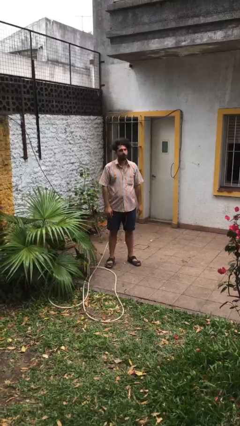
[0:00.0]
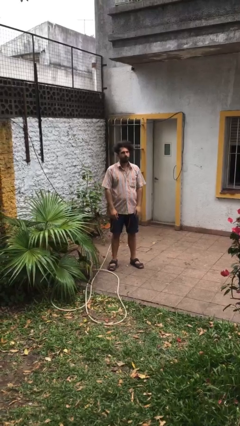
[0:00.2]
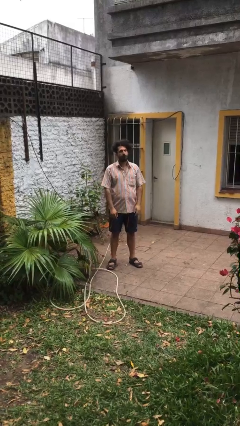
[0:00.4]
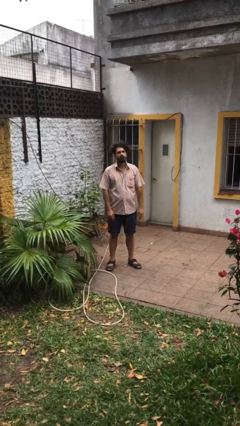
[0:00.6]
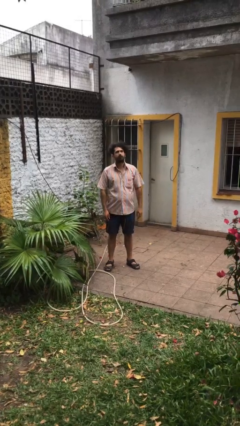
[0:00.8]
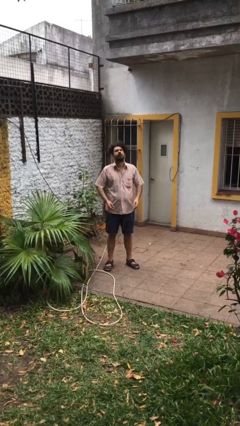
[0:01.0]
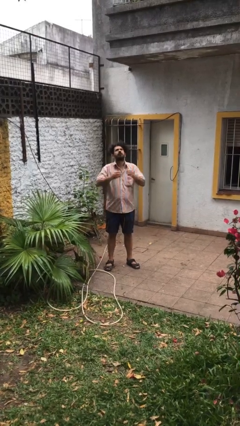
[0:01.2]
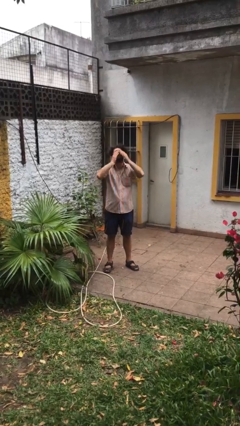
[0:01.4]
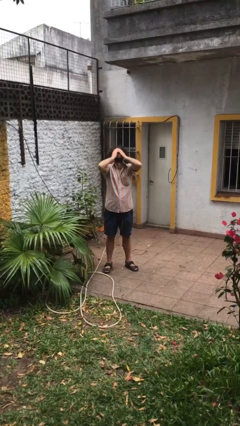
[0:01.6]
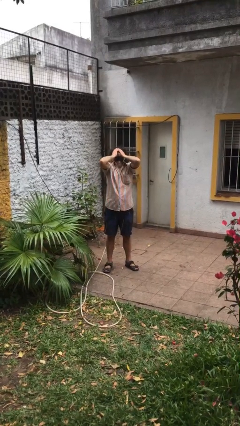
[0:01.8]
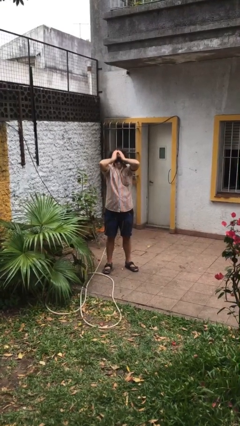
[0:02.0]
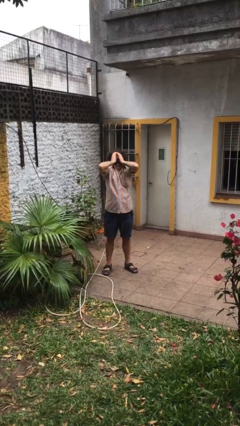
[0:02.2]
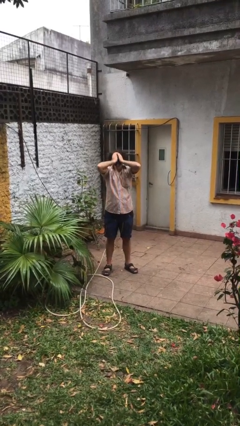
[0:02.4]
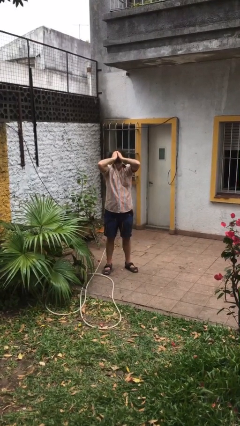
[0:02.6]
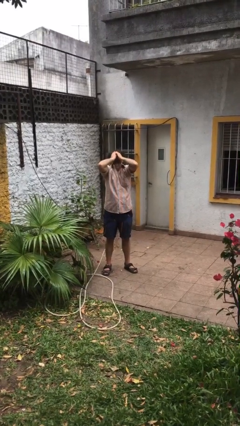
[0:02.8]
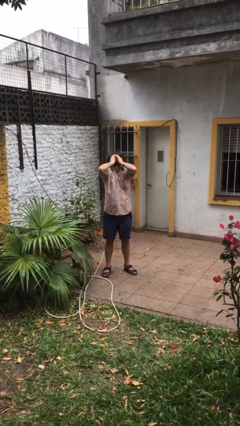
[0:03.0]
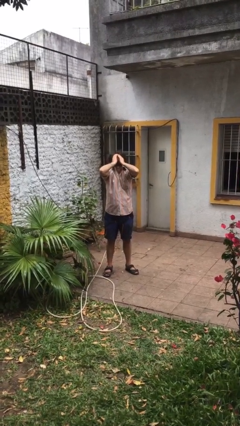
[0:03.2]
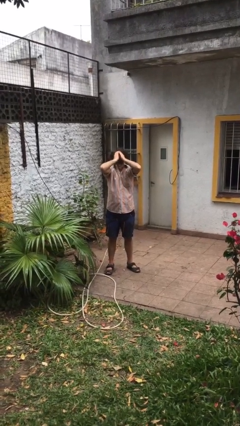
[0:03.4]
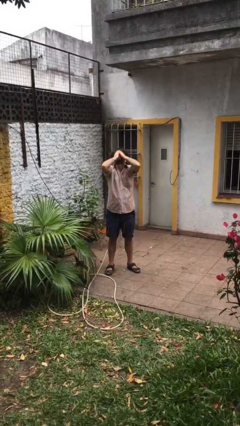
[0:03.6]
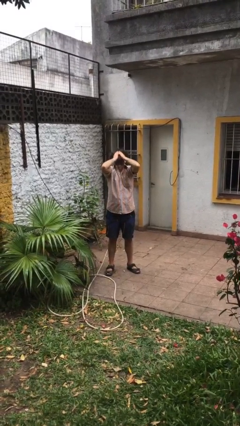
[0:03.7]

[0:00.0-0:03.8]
person rubs eyes

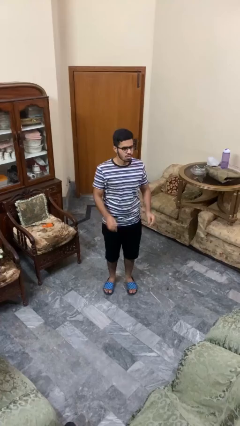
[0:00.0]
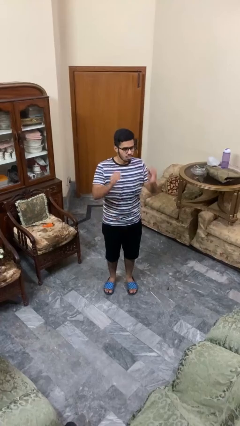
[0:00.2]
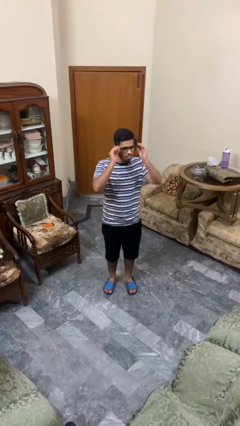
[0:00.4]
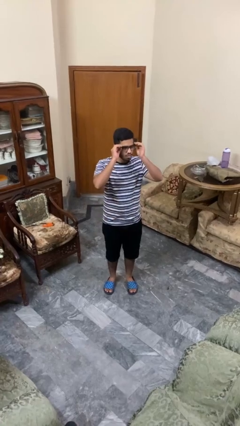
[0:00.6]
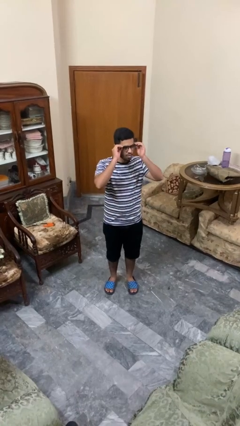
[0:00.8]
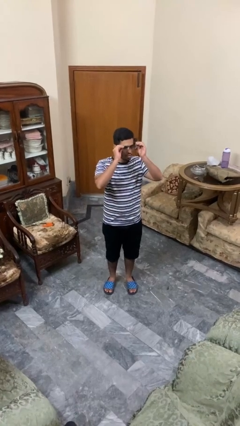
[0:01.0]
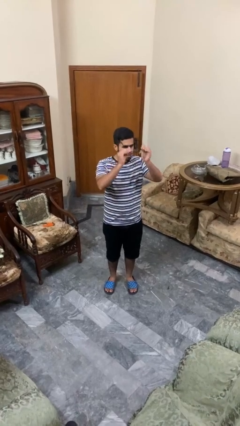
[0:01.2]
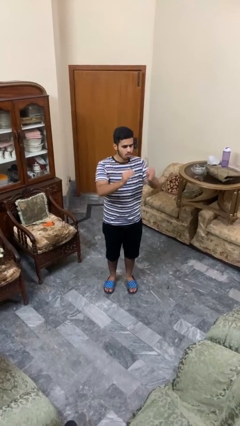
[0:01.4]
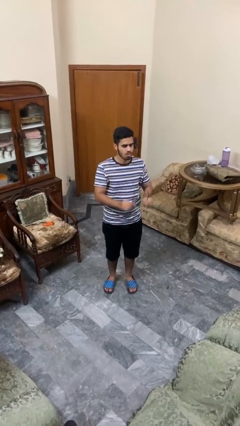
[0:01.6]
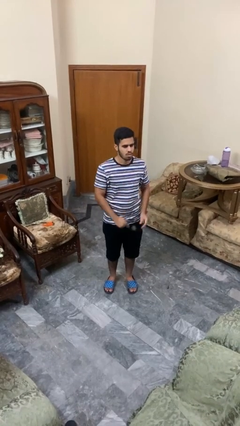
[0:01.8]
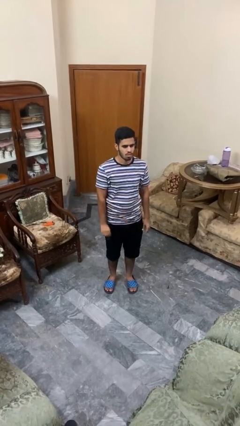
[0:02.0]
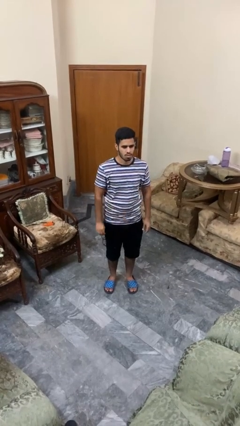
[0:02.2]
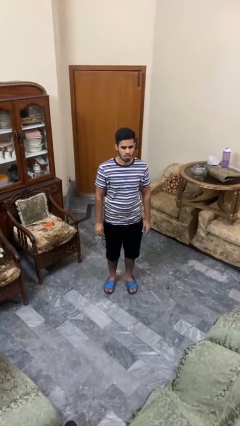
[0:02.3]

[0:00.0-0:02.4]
person takes off glasses

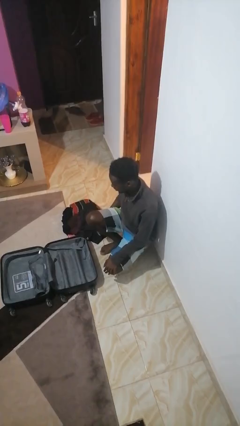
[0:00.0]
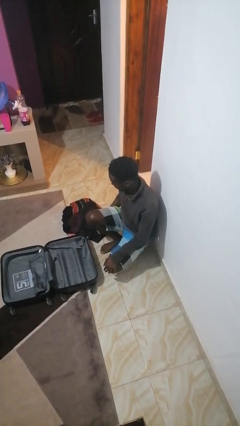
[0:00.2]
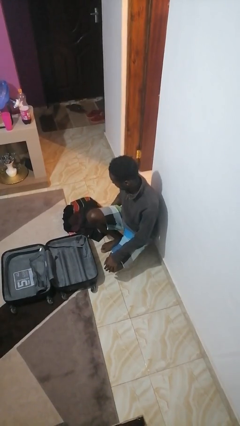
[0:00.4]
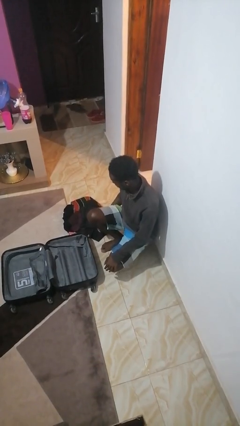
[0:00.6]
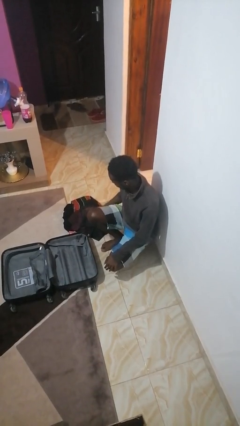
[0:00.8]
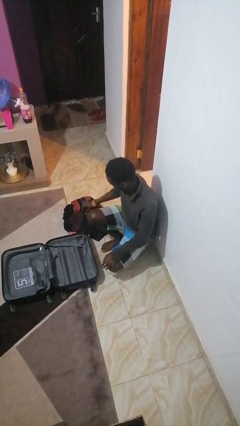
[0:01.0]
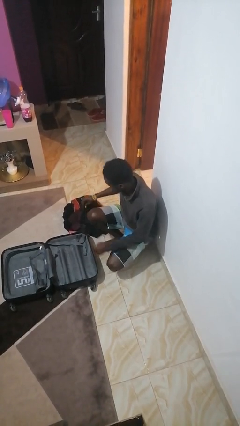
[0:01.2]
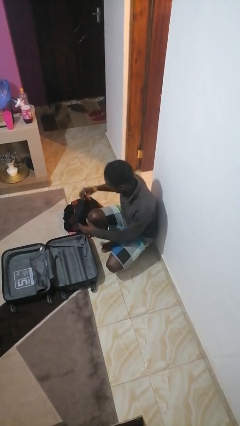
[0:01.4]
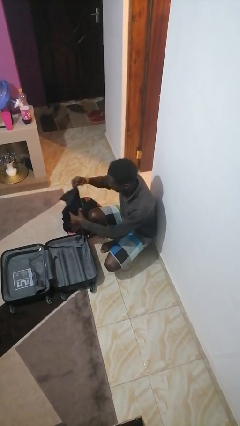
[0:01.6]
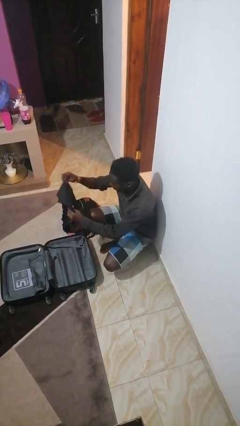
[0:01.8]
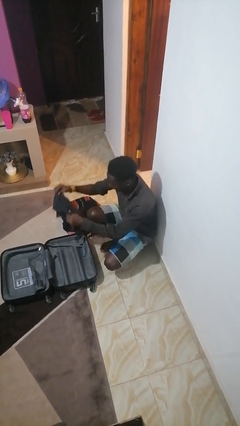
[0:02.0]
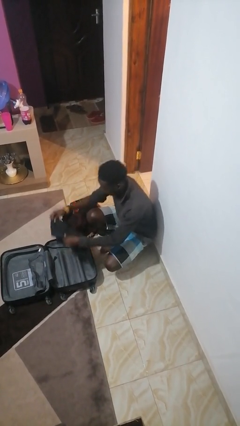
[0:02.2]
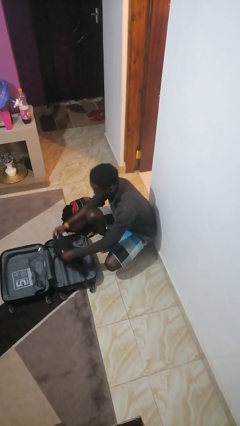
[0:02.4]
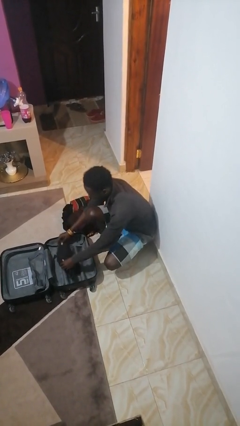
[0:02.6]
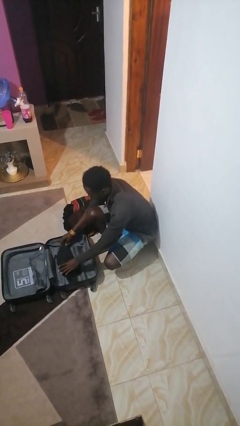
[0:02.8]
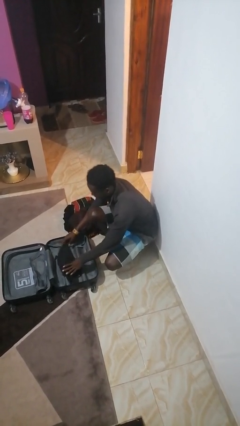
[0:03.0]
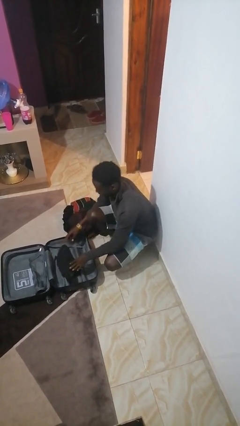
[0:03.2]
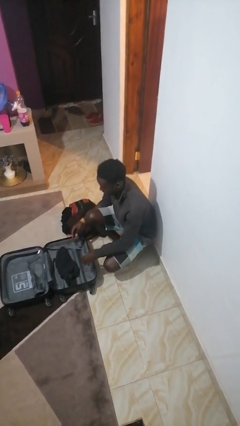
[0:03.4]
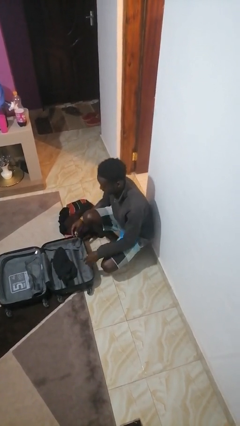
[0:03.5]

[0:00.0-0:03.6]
person loads clothes into suitcase

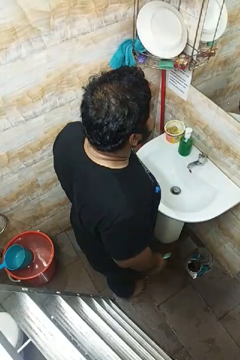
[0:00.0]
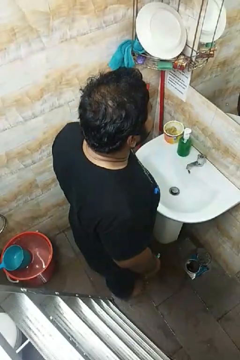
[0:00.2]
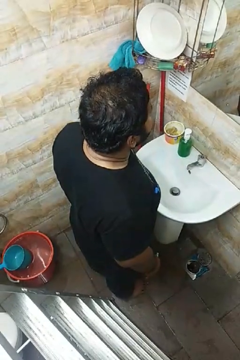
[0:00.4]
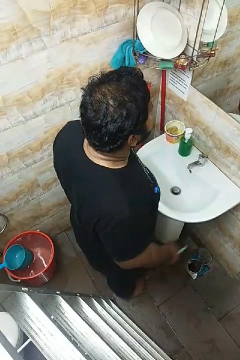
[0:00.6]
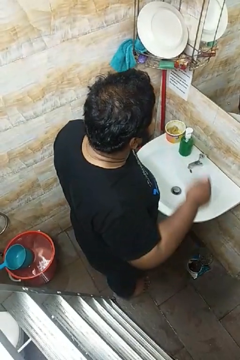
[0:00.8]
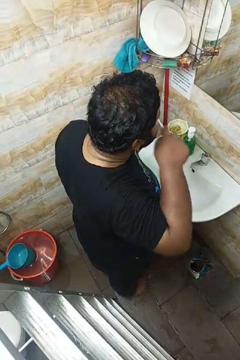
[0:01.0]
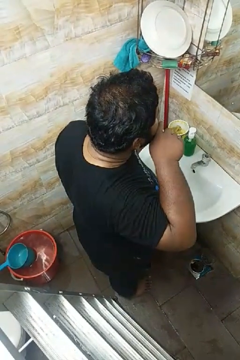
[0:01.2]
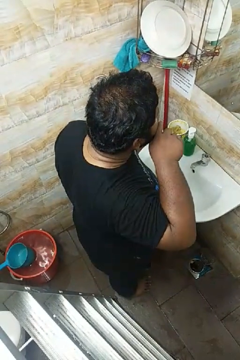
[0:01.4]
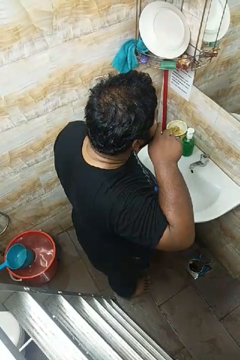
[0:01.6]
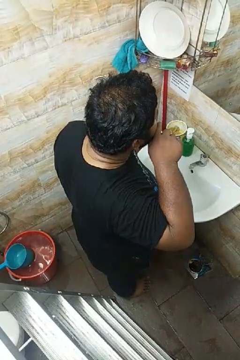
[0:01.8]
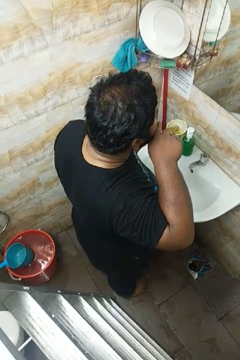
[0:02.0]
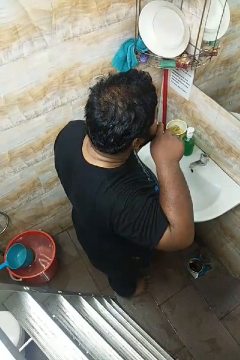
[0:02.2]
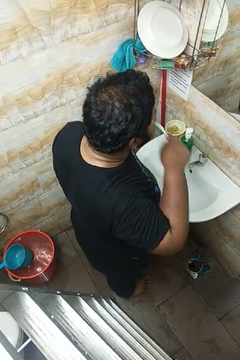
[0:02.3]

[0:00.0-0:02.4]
person brushes teeth

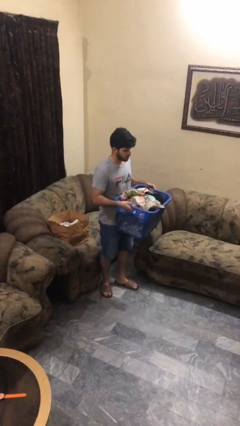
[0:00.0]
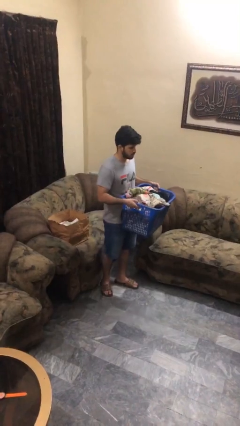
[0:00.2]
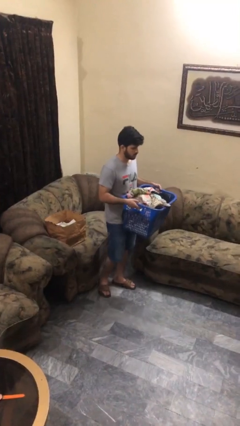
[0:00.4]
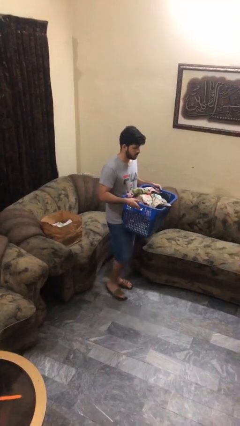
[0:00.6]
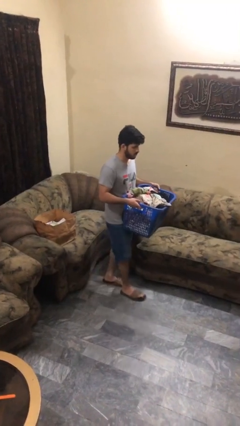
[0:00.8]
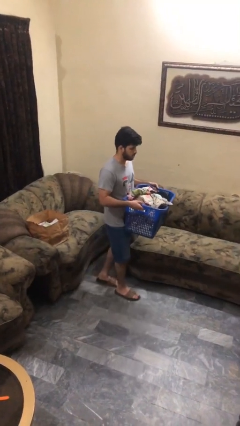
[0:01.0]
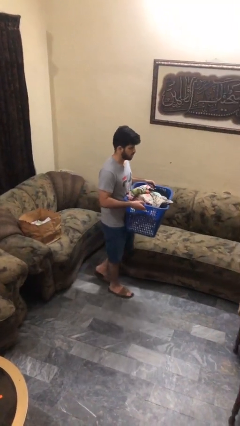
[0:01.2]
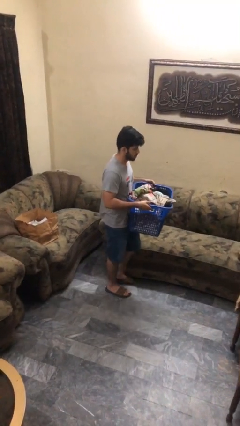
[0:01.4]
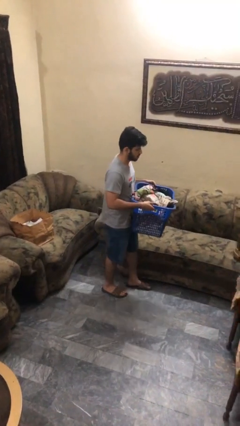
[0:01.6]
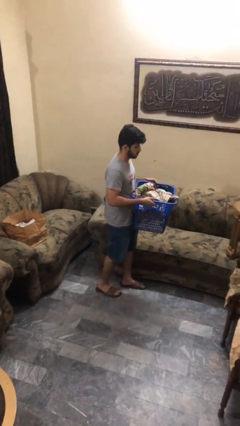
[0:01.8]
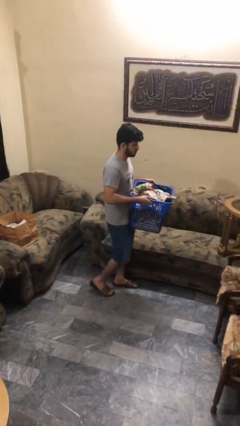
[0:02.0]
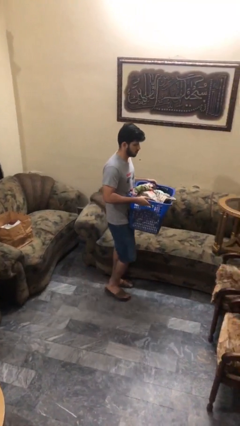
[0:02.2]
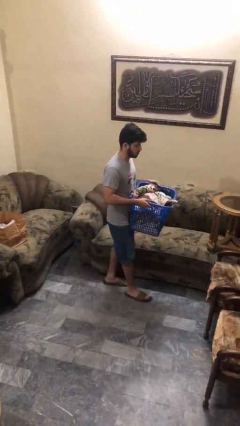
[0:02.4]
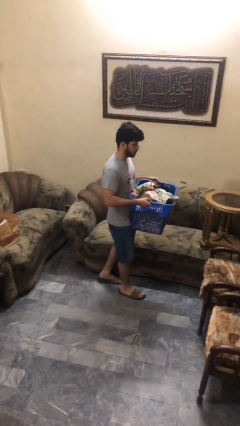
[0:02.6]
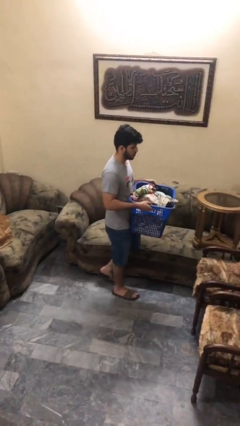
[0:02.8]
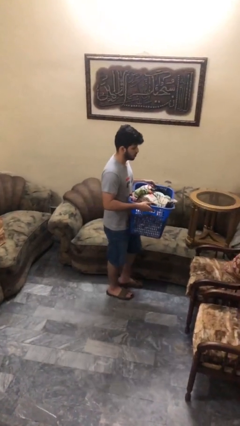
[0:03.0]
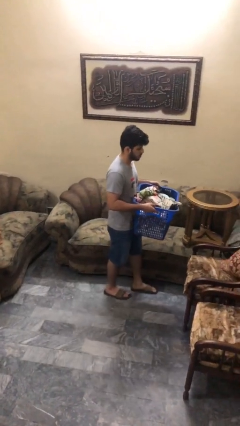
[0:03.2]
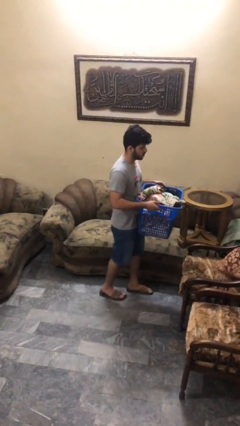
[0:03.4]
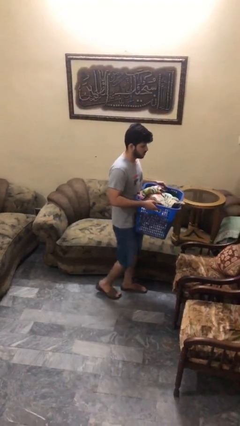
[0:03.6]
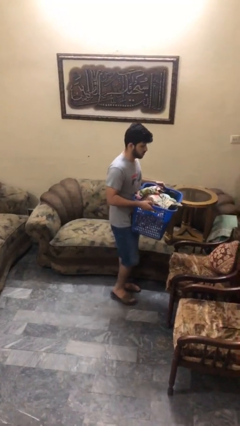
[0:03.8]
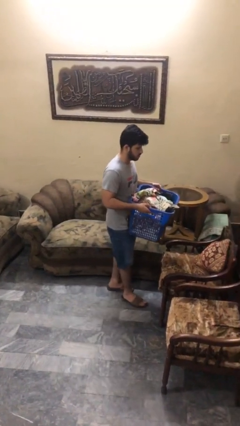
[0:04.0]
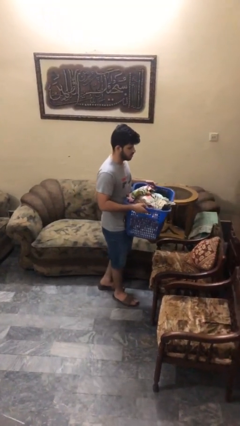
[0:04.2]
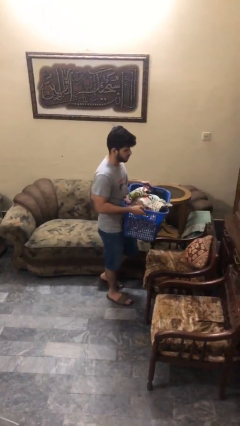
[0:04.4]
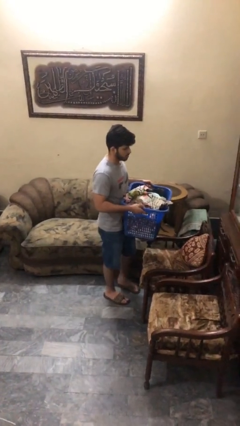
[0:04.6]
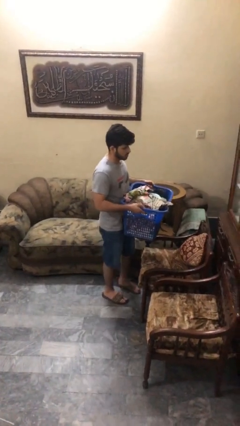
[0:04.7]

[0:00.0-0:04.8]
person carries laundry basket

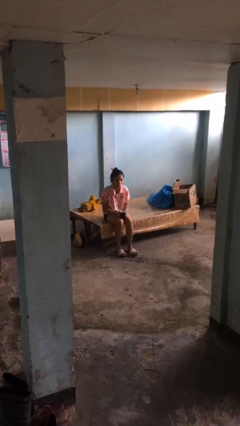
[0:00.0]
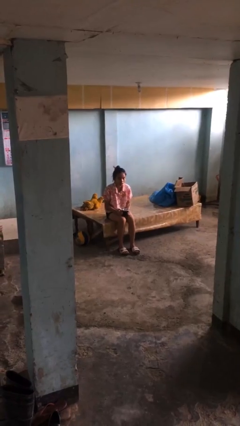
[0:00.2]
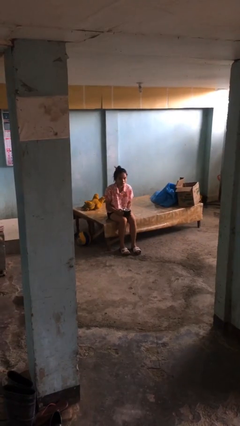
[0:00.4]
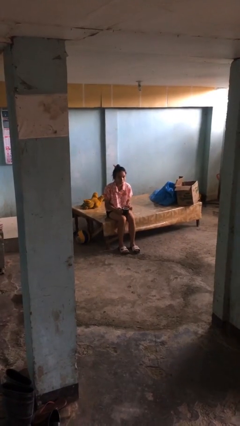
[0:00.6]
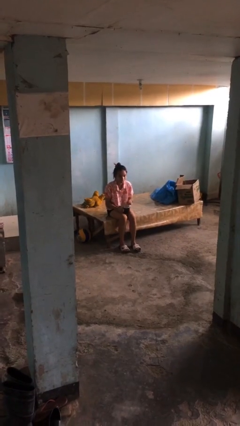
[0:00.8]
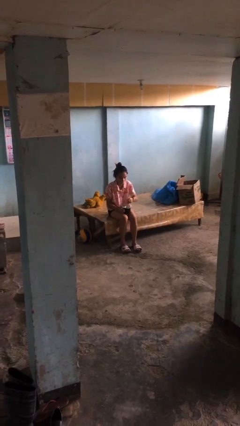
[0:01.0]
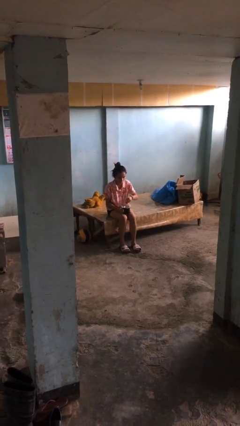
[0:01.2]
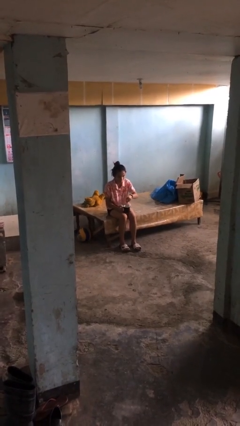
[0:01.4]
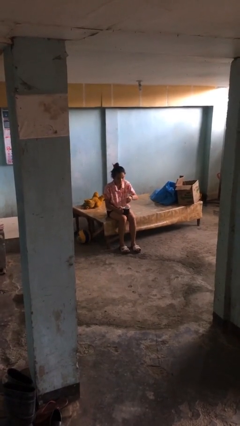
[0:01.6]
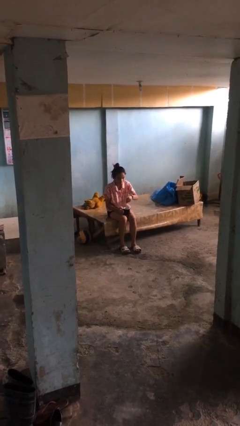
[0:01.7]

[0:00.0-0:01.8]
person stirs mug
